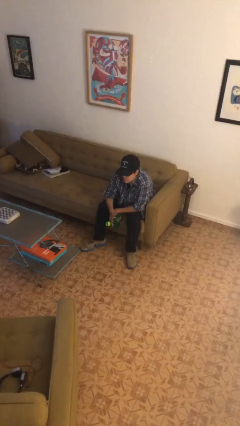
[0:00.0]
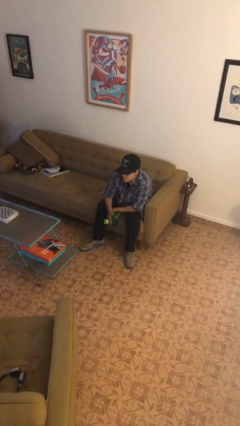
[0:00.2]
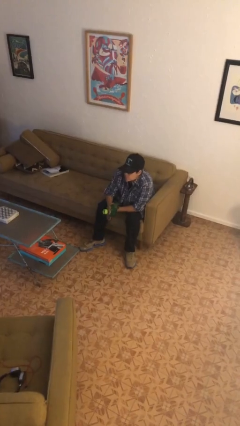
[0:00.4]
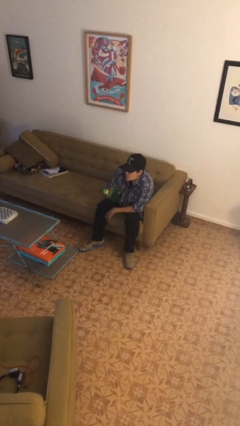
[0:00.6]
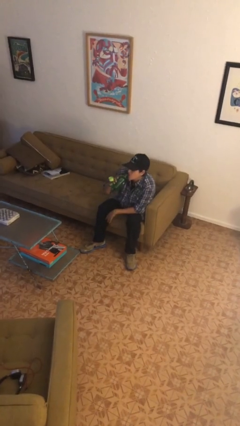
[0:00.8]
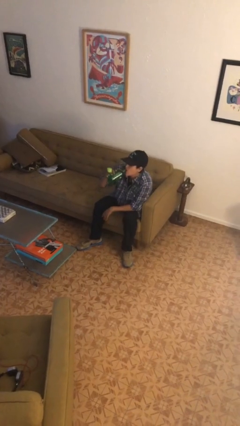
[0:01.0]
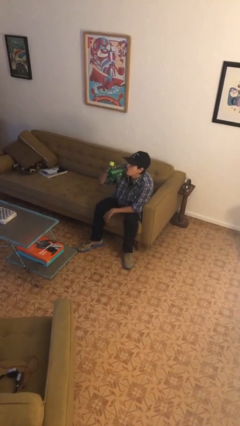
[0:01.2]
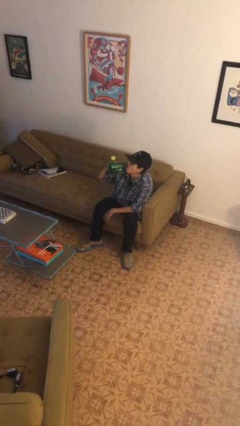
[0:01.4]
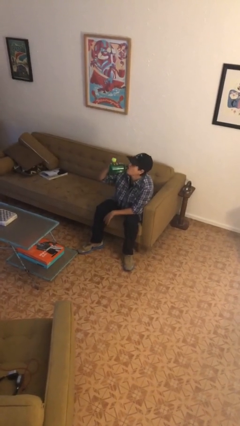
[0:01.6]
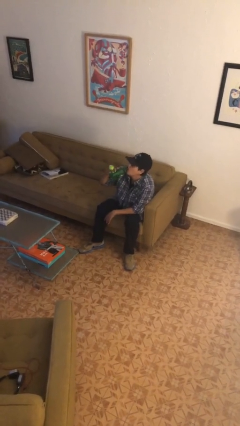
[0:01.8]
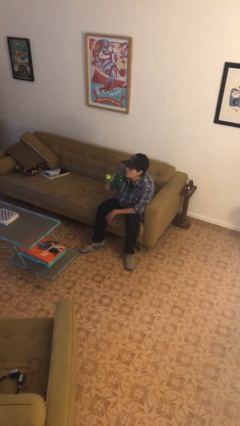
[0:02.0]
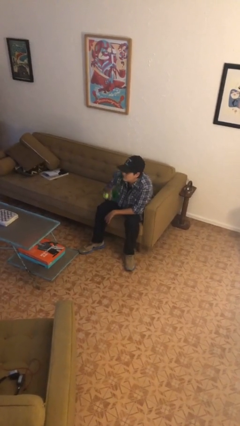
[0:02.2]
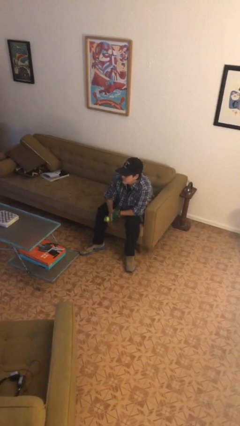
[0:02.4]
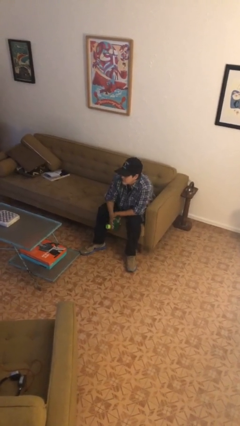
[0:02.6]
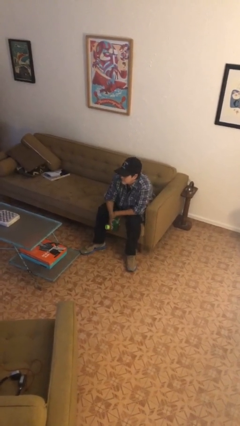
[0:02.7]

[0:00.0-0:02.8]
person drinks from bottle

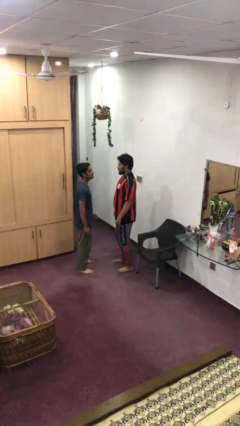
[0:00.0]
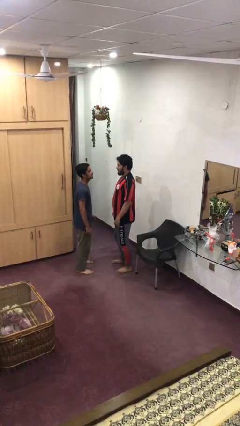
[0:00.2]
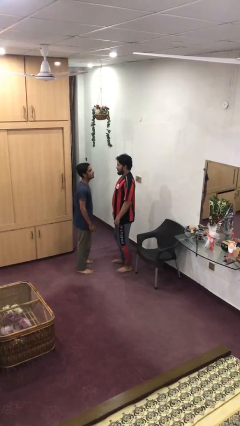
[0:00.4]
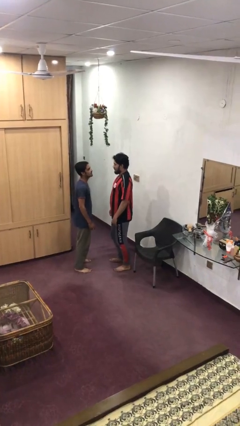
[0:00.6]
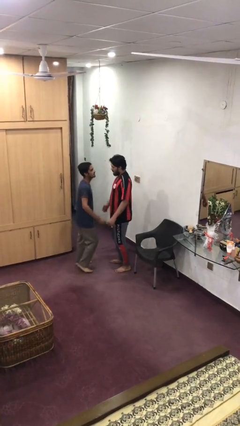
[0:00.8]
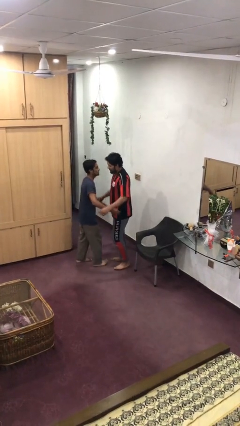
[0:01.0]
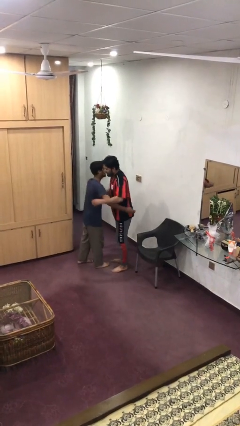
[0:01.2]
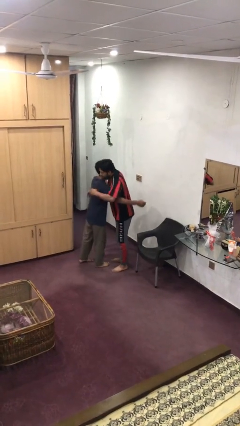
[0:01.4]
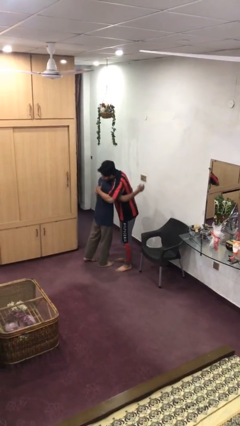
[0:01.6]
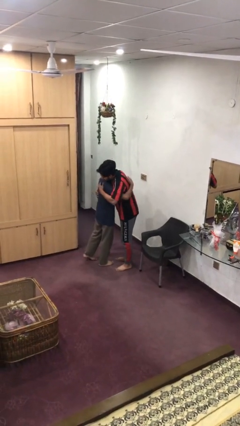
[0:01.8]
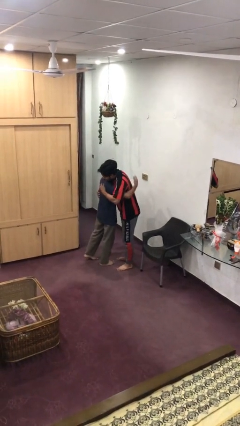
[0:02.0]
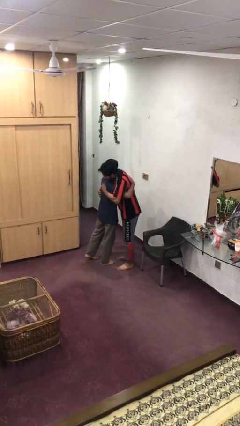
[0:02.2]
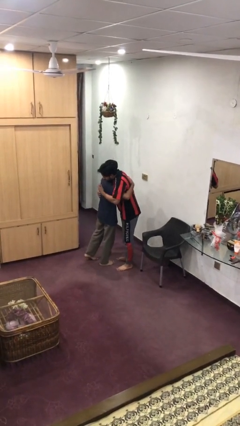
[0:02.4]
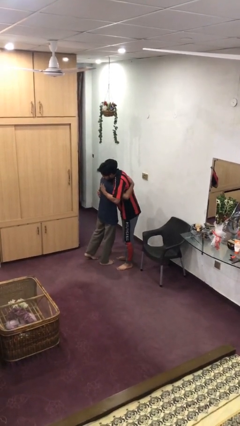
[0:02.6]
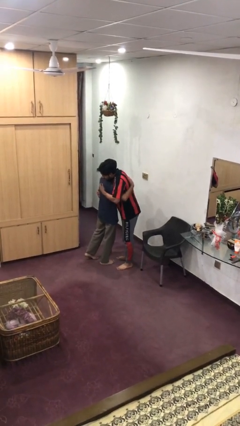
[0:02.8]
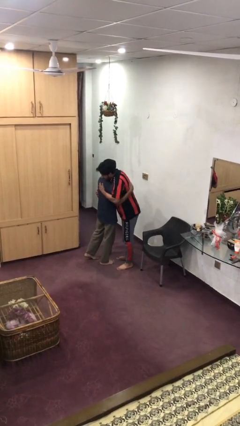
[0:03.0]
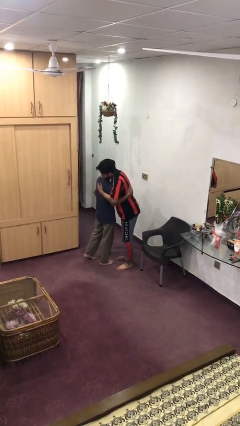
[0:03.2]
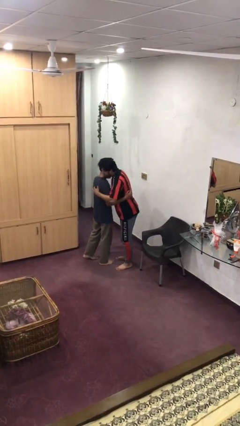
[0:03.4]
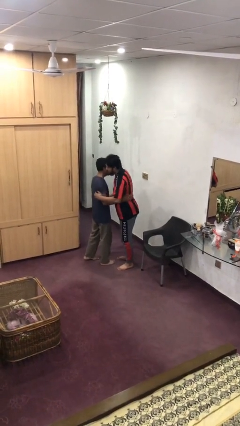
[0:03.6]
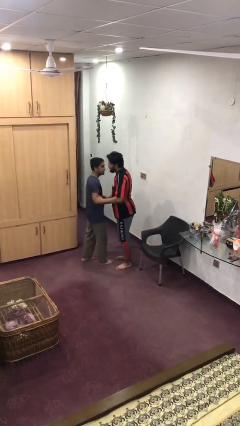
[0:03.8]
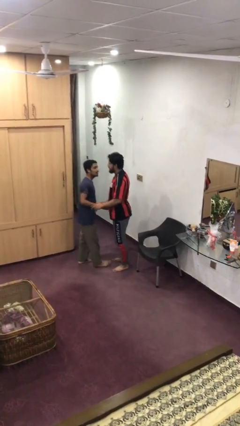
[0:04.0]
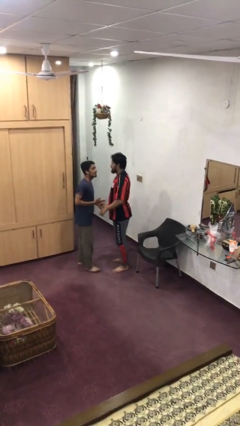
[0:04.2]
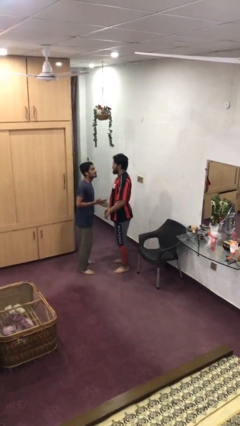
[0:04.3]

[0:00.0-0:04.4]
person embraces person

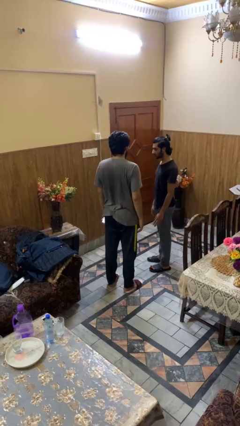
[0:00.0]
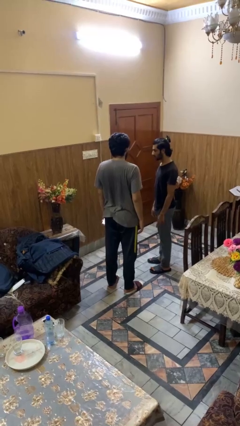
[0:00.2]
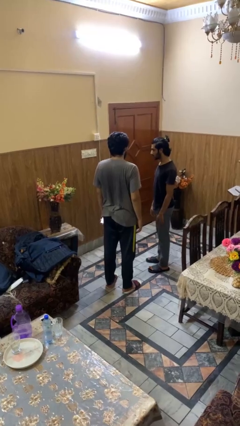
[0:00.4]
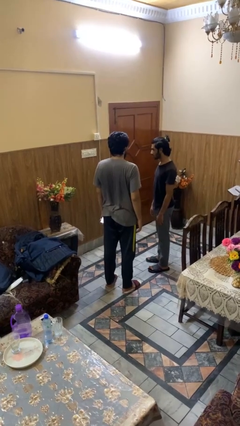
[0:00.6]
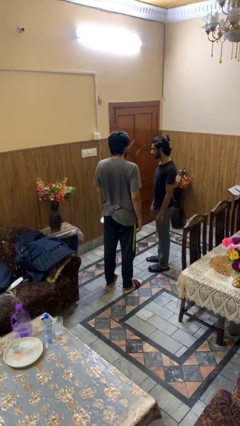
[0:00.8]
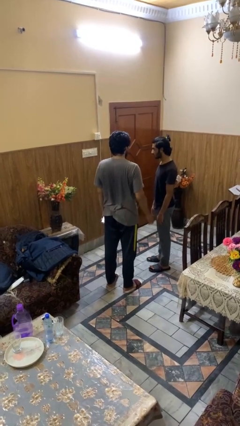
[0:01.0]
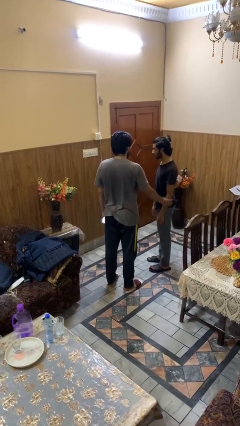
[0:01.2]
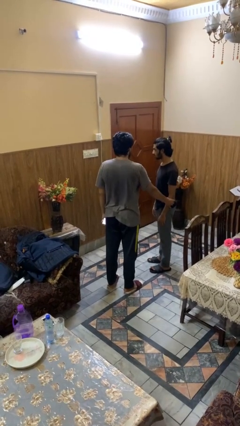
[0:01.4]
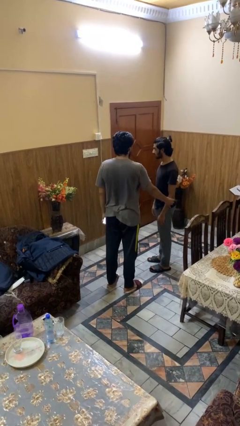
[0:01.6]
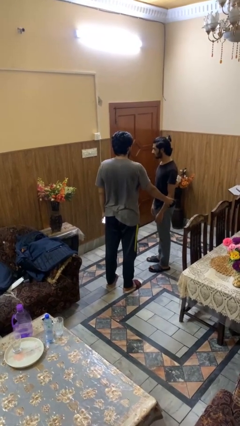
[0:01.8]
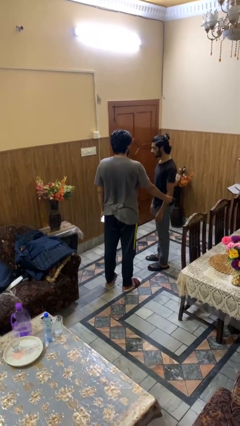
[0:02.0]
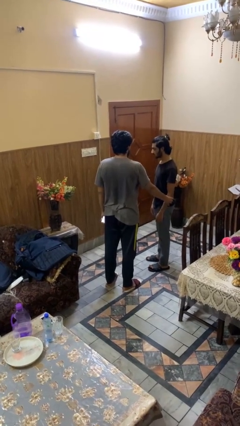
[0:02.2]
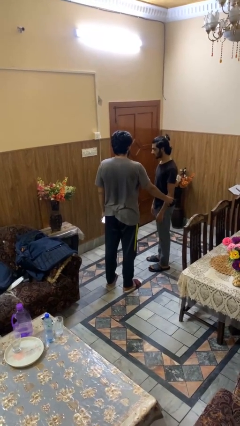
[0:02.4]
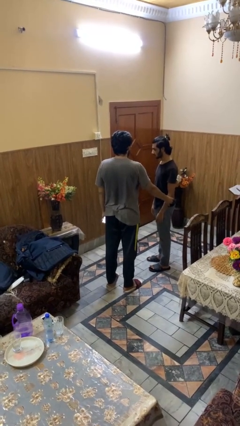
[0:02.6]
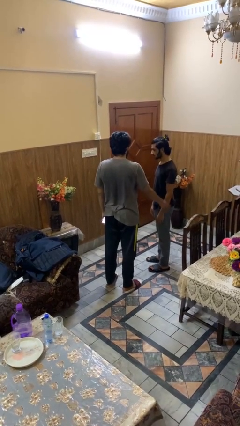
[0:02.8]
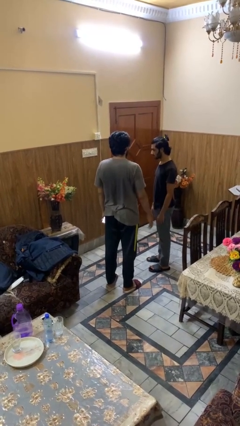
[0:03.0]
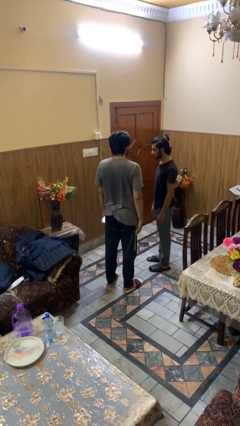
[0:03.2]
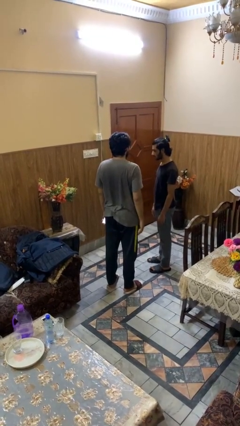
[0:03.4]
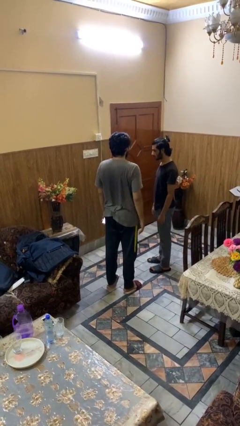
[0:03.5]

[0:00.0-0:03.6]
person grabs person by forearm

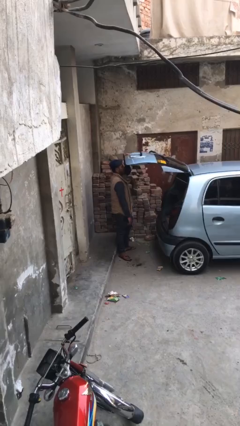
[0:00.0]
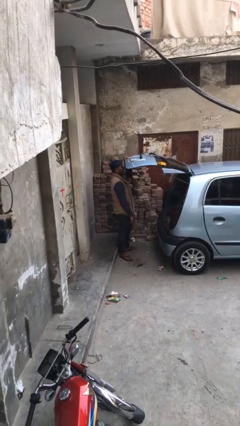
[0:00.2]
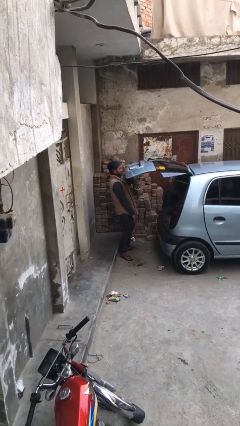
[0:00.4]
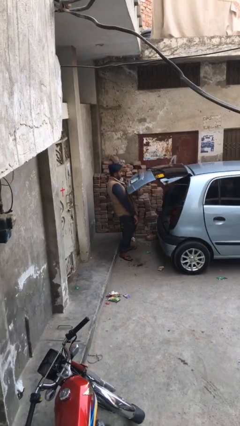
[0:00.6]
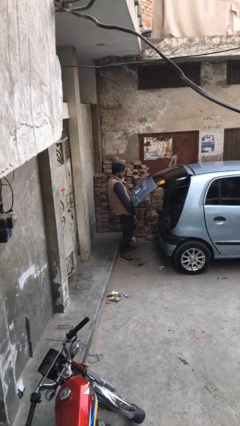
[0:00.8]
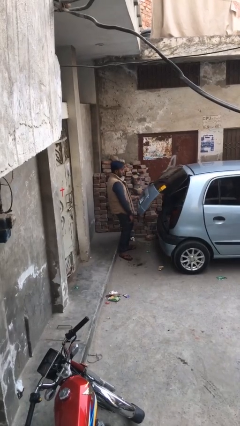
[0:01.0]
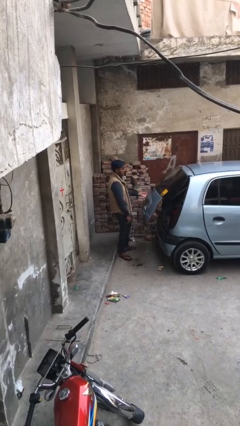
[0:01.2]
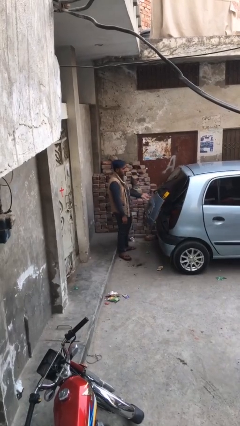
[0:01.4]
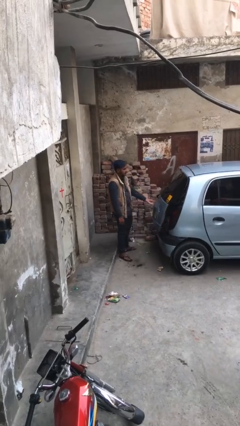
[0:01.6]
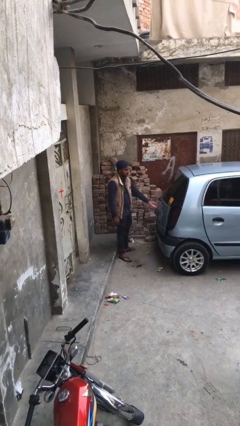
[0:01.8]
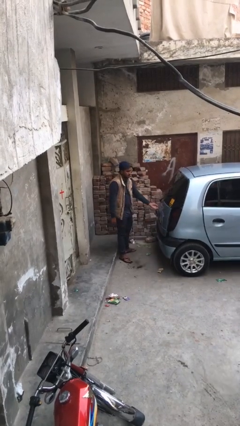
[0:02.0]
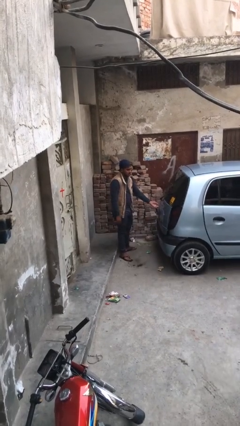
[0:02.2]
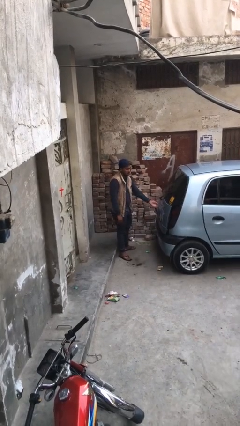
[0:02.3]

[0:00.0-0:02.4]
person closes car trunk

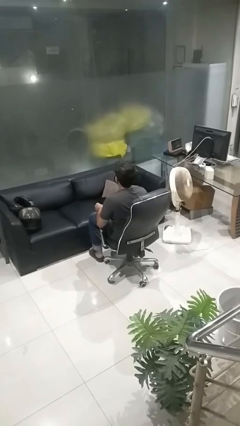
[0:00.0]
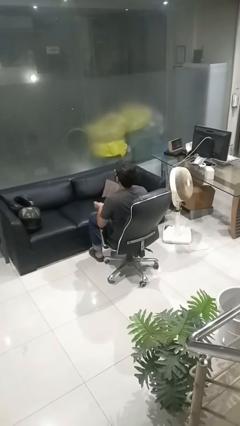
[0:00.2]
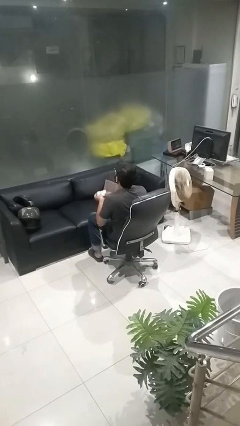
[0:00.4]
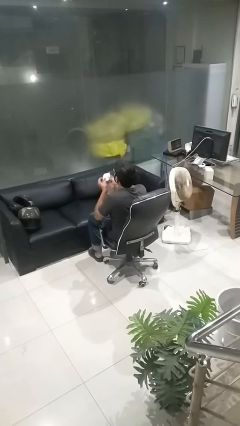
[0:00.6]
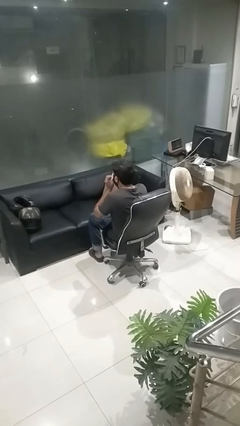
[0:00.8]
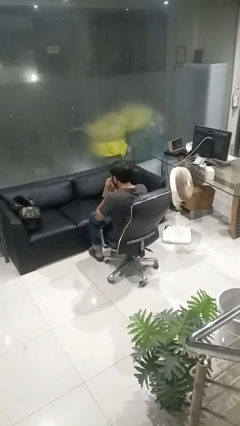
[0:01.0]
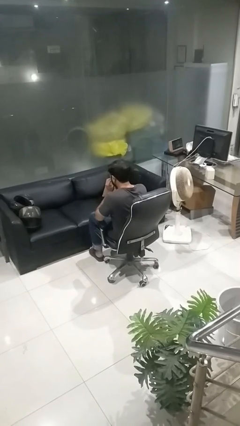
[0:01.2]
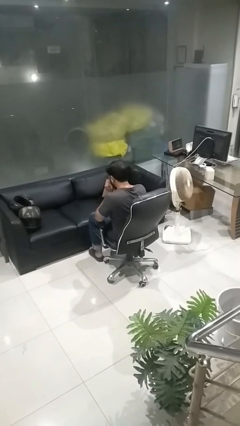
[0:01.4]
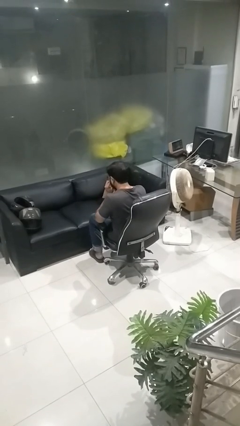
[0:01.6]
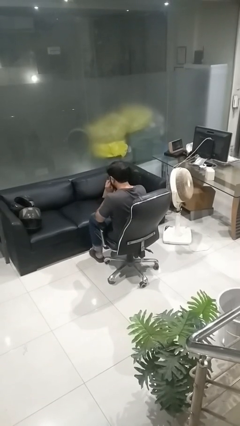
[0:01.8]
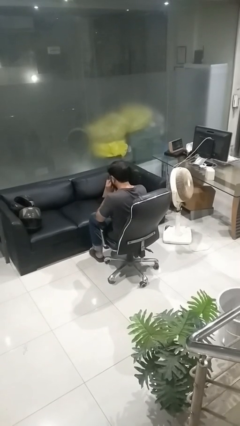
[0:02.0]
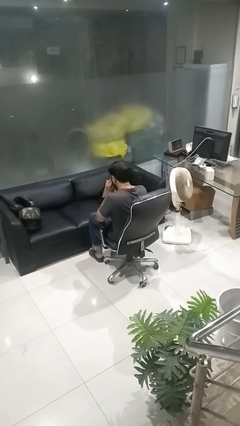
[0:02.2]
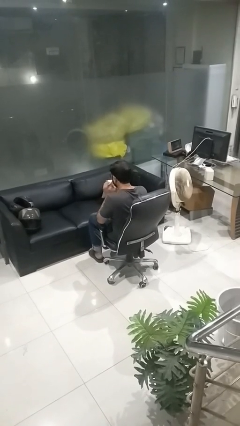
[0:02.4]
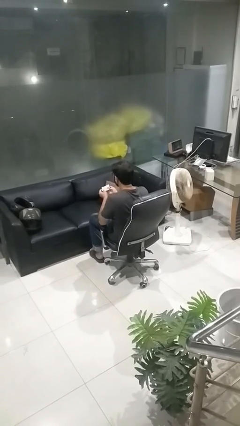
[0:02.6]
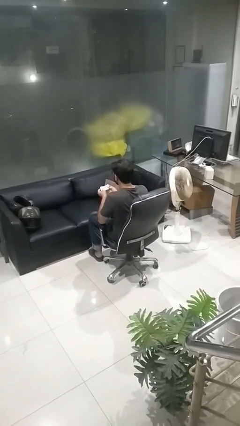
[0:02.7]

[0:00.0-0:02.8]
person blows nose

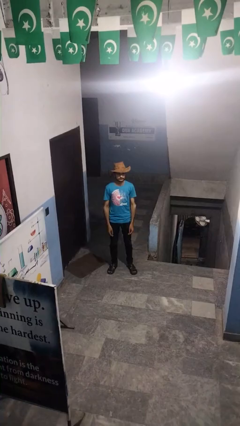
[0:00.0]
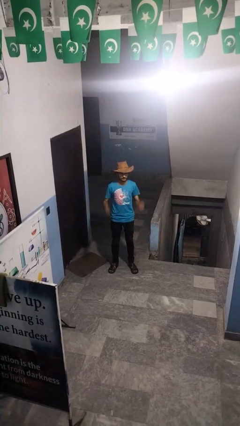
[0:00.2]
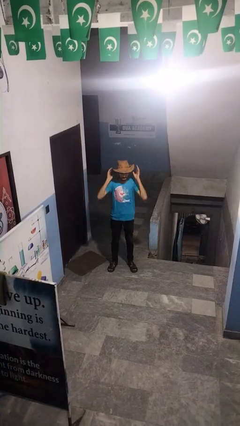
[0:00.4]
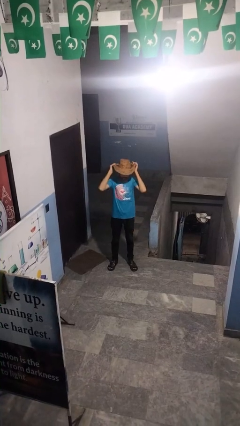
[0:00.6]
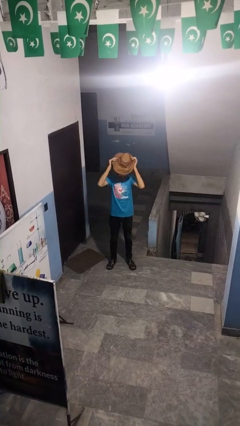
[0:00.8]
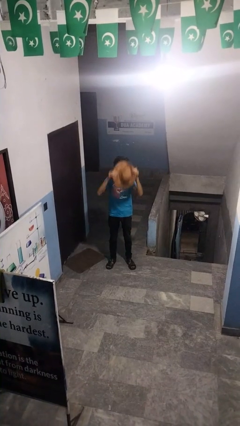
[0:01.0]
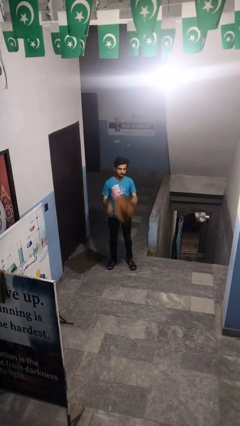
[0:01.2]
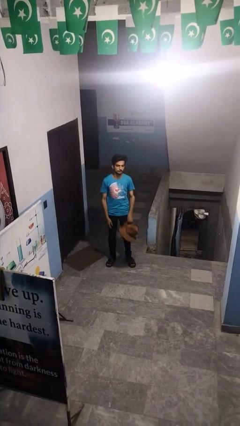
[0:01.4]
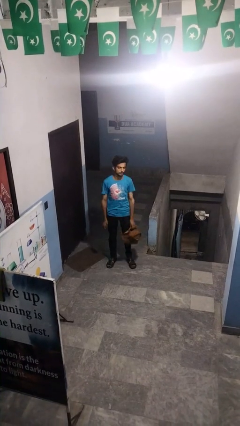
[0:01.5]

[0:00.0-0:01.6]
person takes off hat
